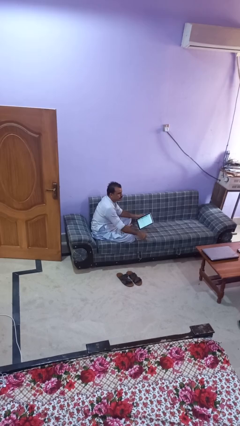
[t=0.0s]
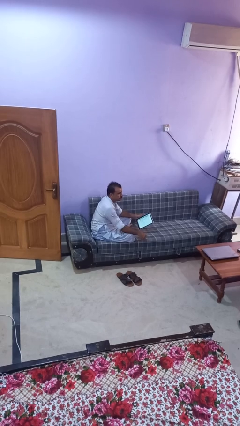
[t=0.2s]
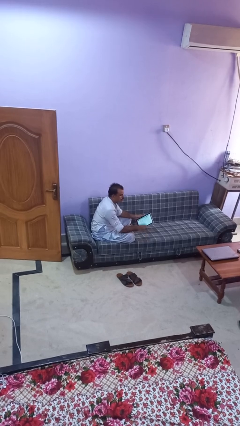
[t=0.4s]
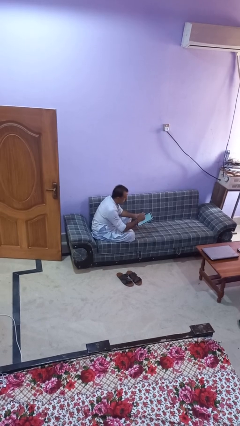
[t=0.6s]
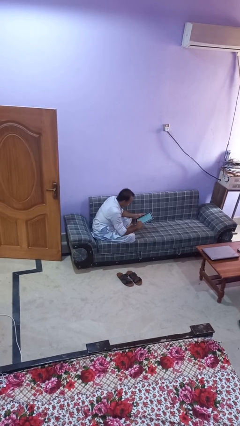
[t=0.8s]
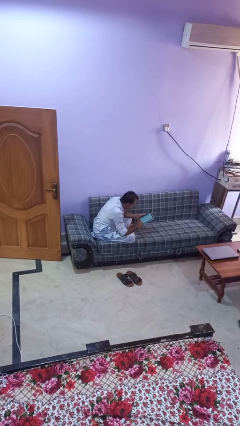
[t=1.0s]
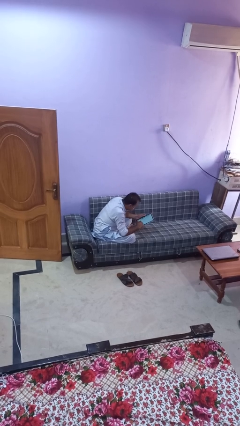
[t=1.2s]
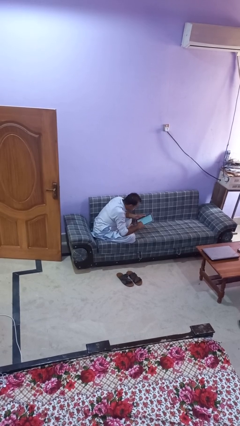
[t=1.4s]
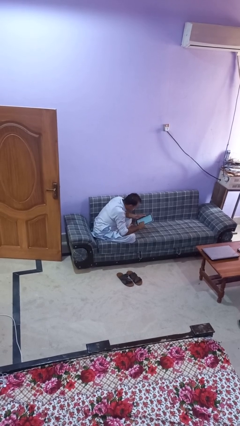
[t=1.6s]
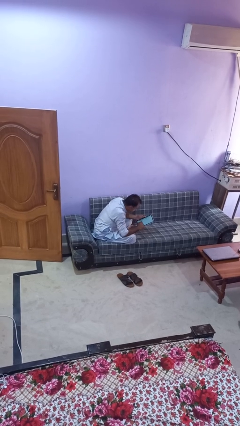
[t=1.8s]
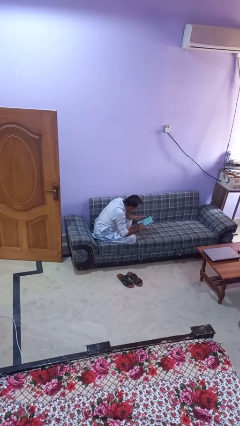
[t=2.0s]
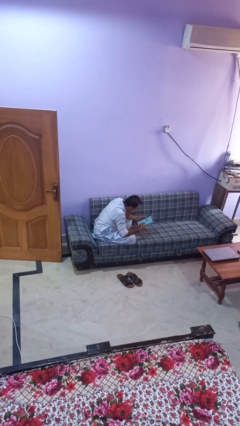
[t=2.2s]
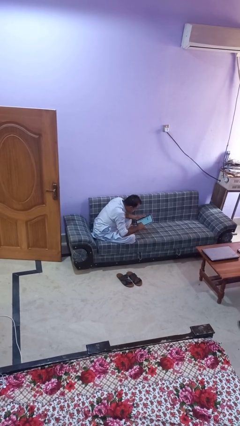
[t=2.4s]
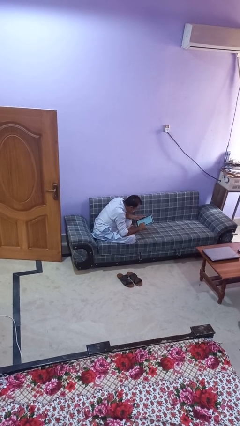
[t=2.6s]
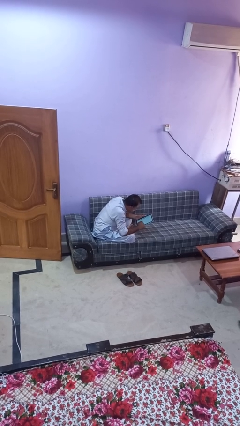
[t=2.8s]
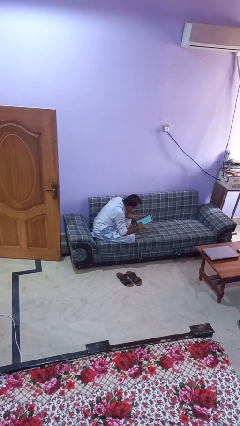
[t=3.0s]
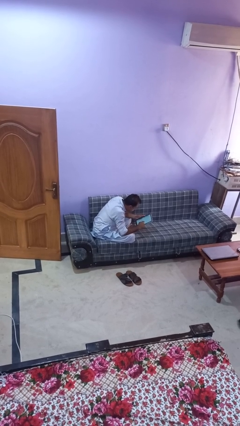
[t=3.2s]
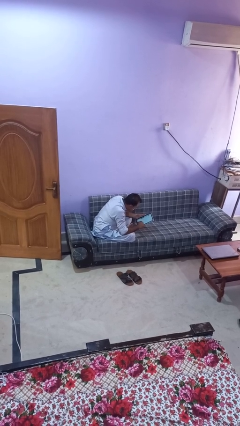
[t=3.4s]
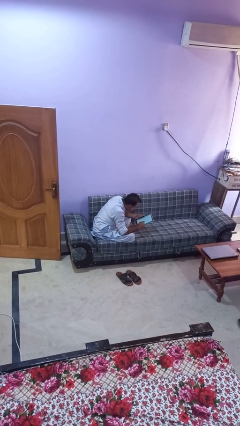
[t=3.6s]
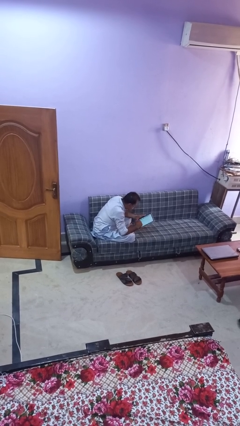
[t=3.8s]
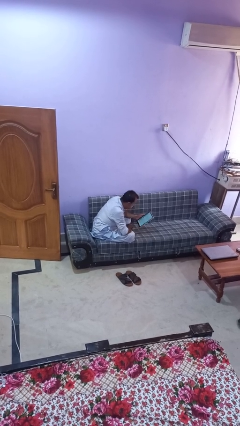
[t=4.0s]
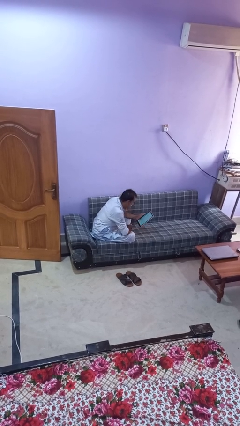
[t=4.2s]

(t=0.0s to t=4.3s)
person interacts with tablet

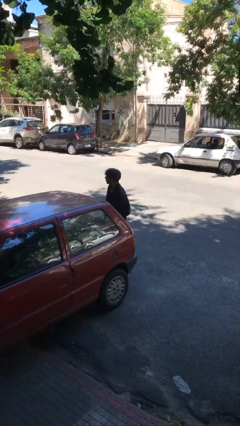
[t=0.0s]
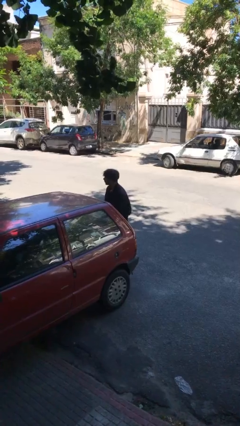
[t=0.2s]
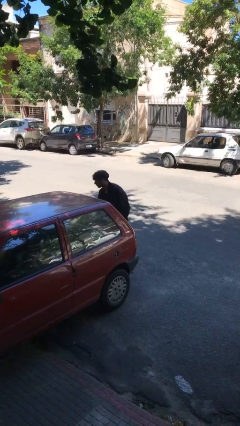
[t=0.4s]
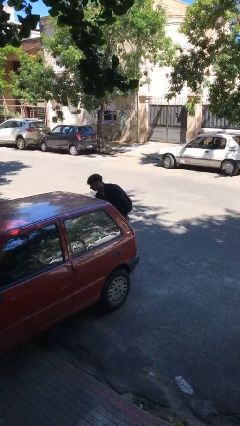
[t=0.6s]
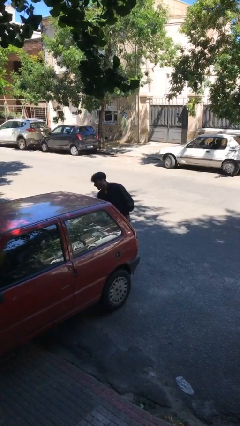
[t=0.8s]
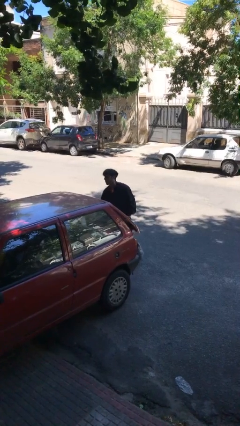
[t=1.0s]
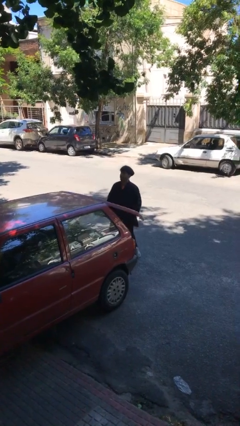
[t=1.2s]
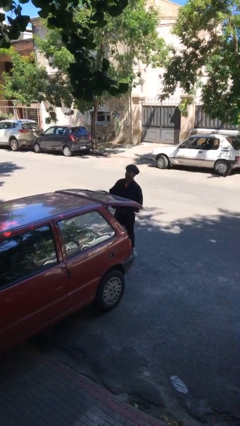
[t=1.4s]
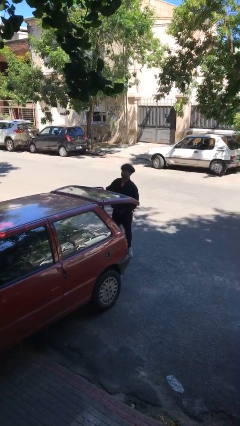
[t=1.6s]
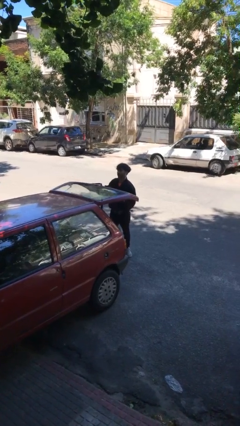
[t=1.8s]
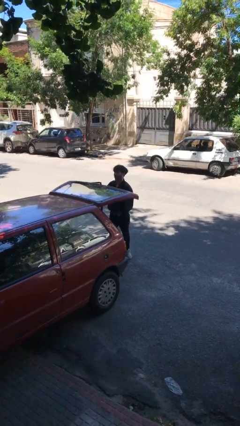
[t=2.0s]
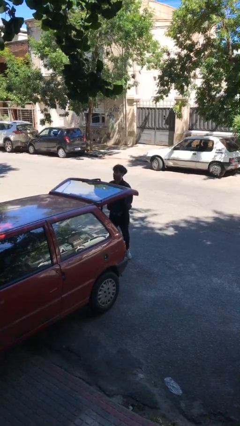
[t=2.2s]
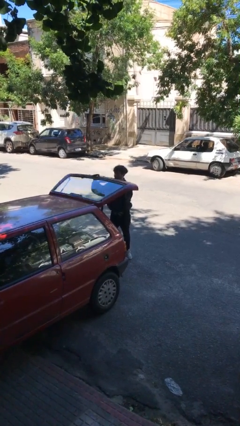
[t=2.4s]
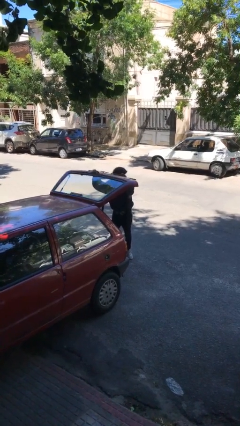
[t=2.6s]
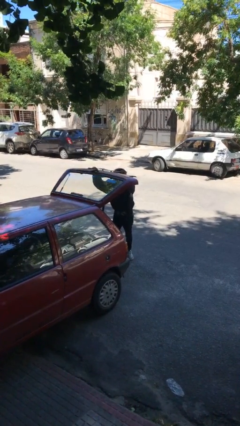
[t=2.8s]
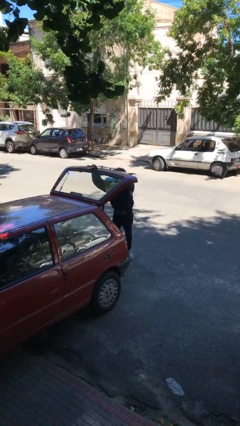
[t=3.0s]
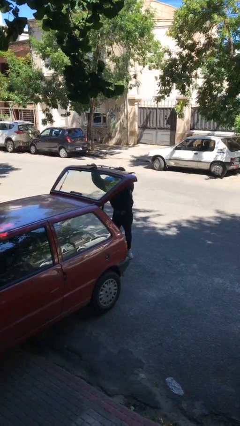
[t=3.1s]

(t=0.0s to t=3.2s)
person opens car trunk

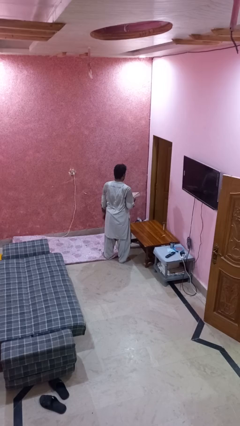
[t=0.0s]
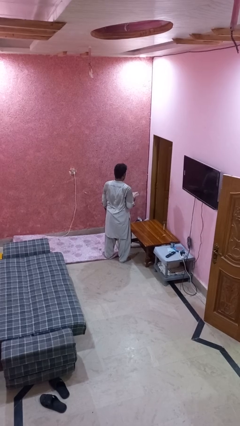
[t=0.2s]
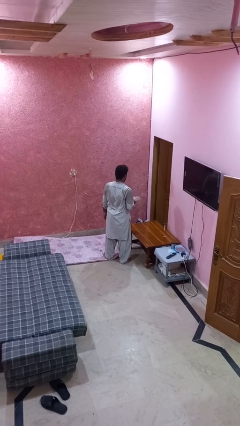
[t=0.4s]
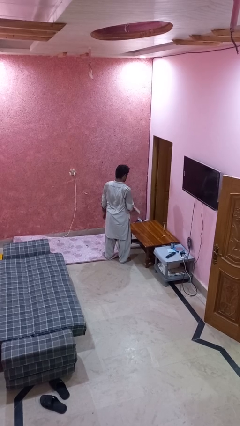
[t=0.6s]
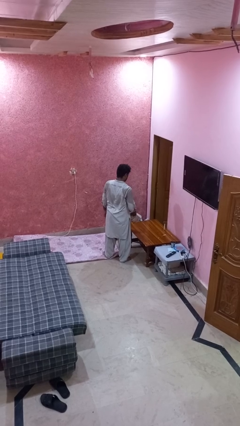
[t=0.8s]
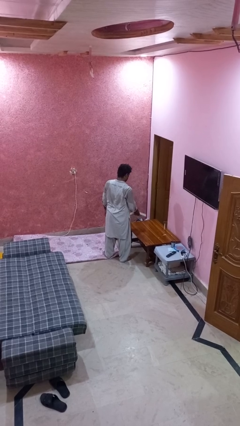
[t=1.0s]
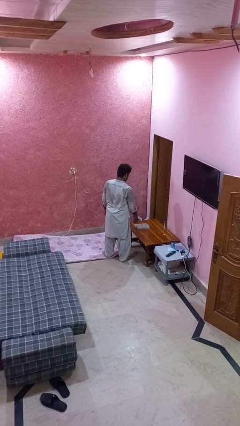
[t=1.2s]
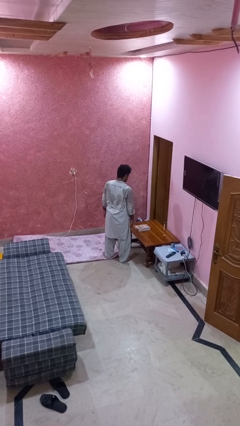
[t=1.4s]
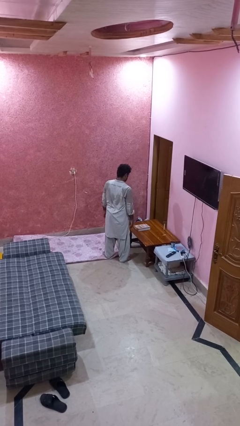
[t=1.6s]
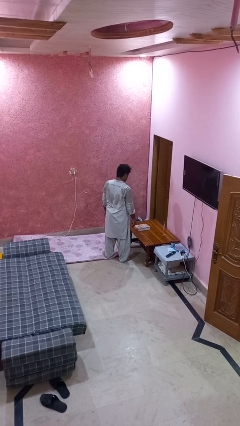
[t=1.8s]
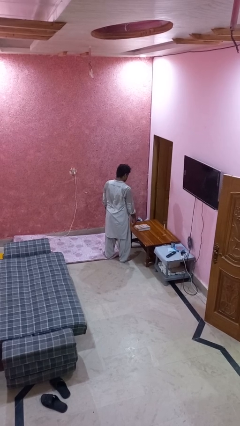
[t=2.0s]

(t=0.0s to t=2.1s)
person throws object on table

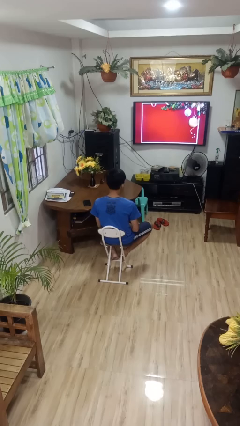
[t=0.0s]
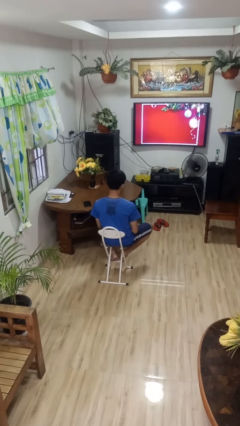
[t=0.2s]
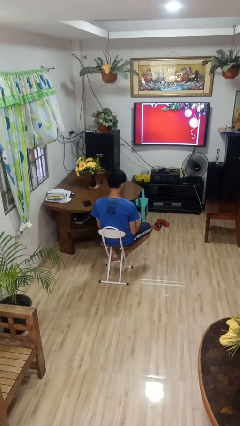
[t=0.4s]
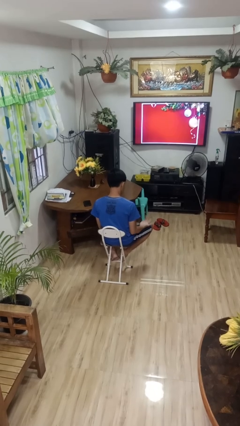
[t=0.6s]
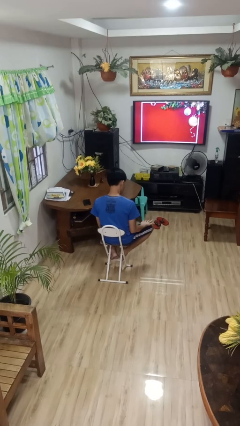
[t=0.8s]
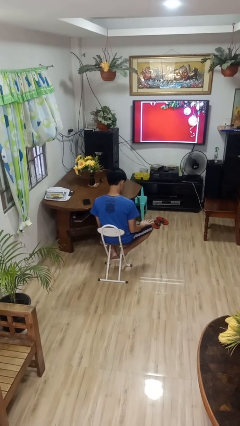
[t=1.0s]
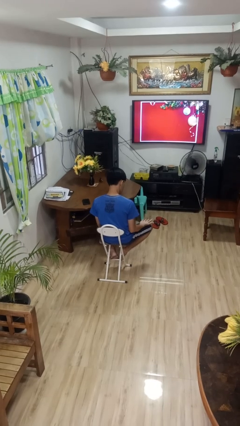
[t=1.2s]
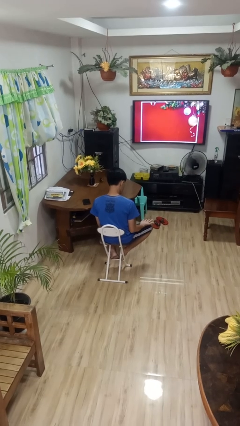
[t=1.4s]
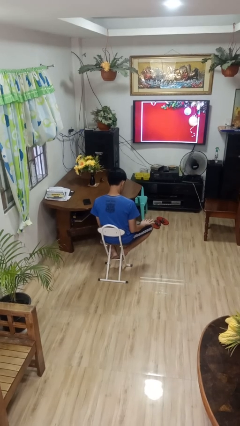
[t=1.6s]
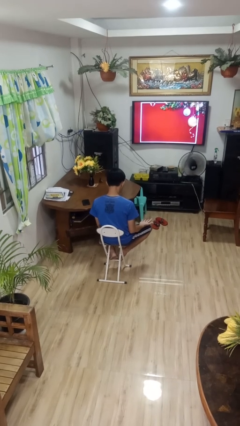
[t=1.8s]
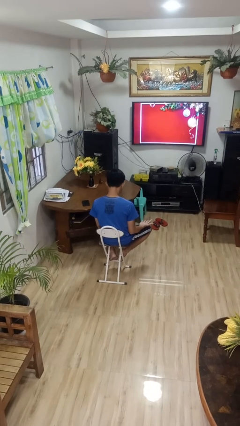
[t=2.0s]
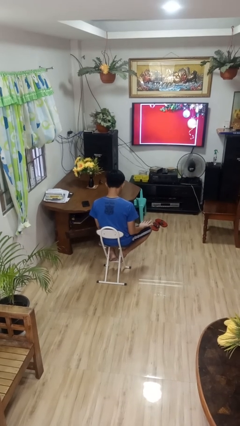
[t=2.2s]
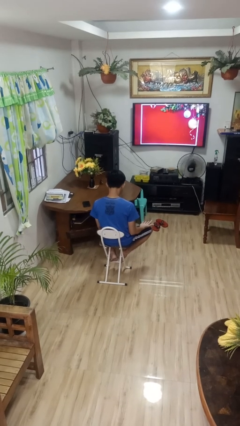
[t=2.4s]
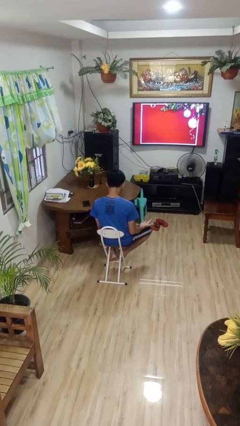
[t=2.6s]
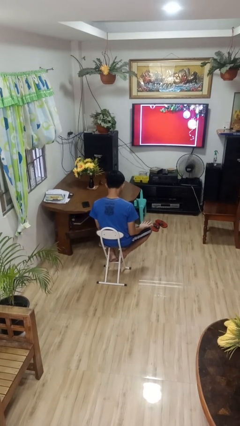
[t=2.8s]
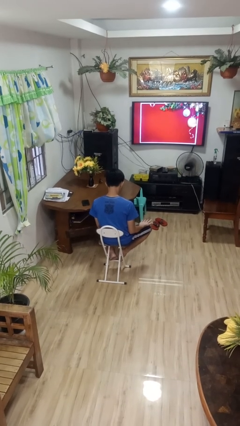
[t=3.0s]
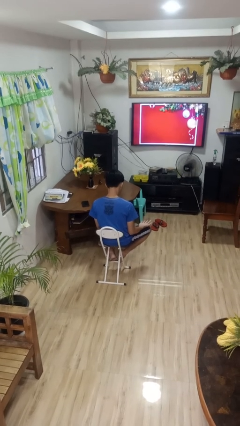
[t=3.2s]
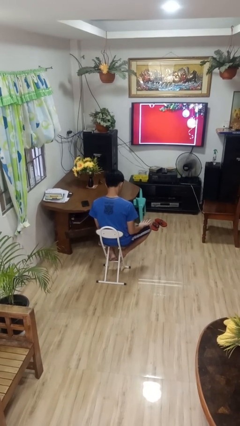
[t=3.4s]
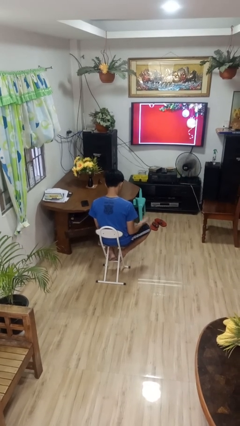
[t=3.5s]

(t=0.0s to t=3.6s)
person looks at hands in lap

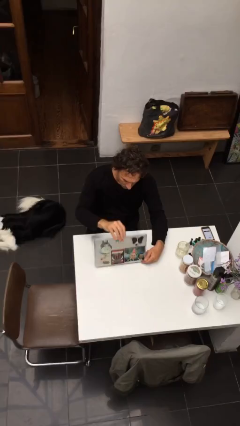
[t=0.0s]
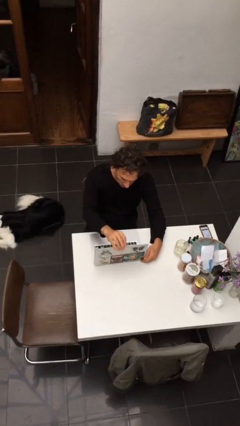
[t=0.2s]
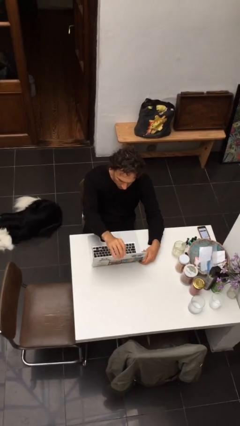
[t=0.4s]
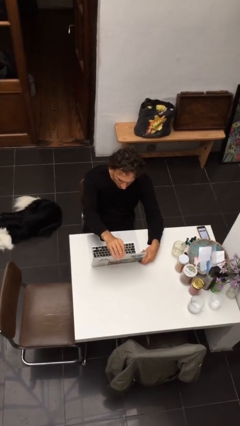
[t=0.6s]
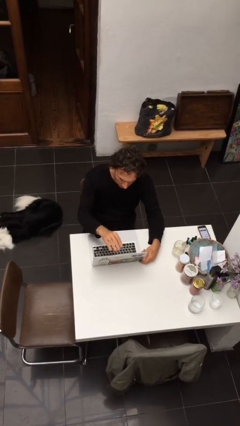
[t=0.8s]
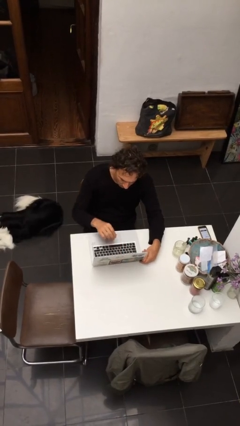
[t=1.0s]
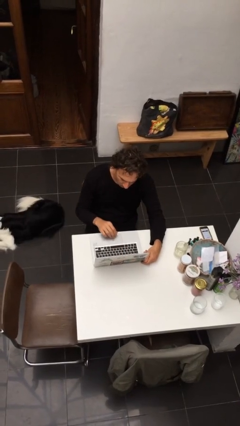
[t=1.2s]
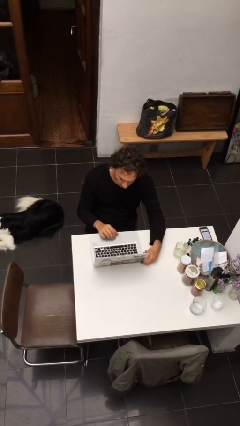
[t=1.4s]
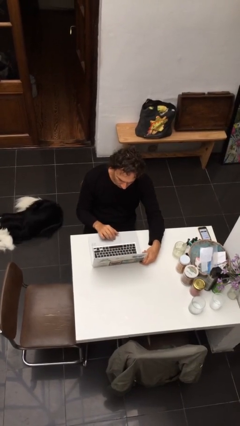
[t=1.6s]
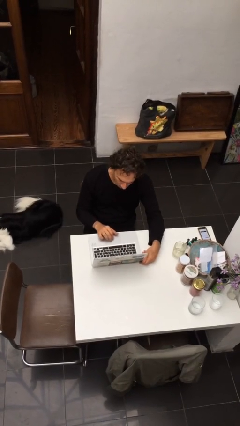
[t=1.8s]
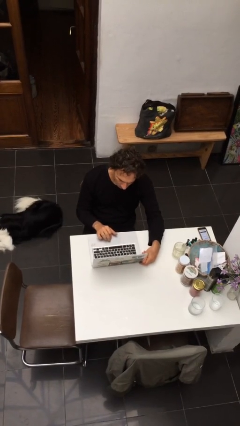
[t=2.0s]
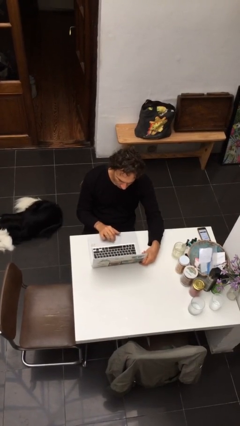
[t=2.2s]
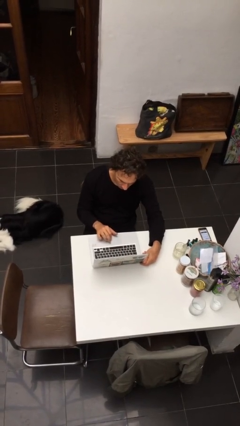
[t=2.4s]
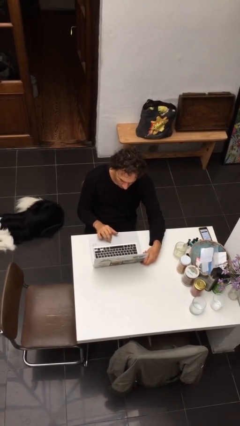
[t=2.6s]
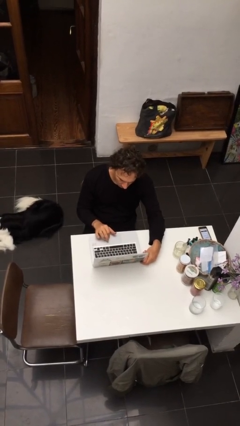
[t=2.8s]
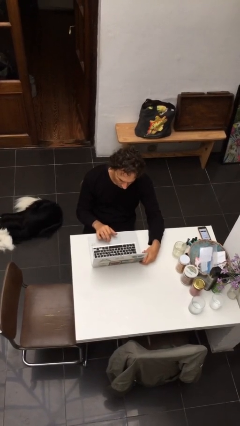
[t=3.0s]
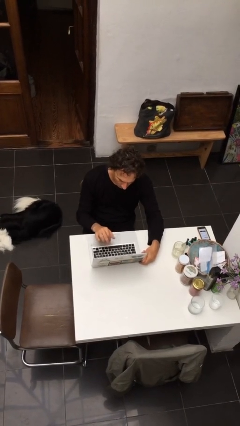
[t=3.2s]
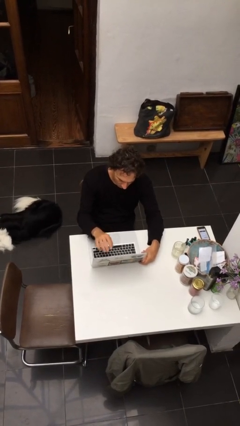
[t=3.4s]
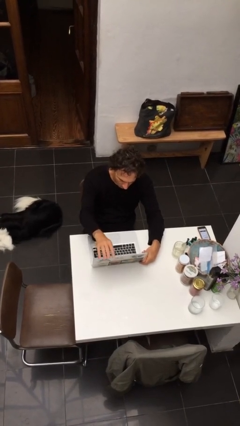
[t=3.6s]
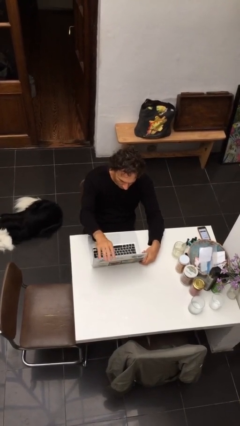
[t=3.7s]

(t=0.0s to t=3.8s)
person interacts with laptop

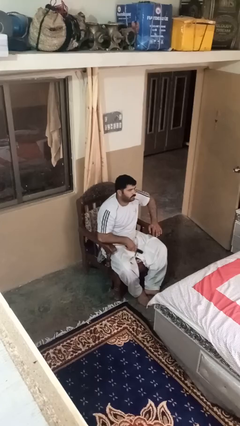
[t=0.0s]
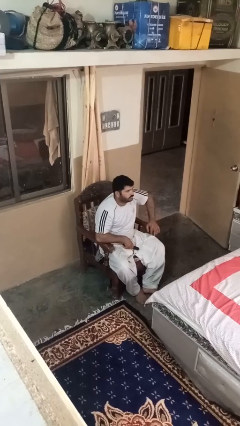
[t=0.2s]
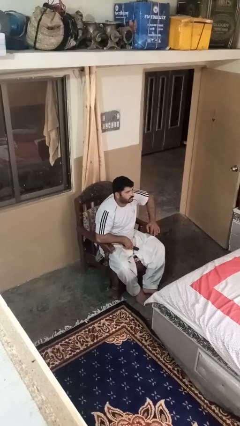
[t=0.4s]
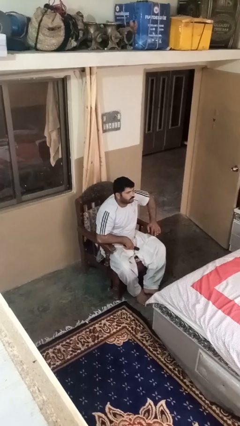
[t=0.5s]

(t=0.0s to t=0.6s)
person uses television remote
